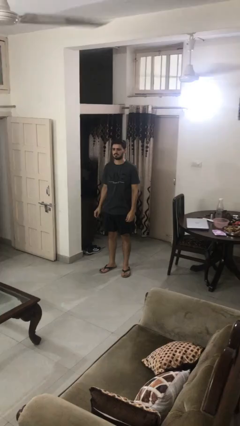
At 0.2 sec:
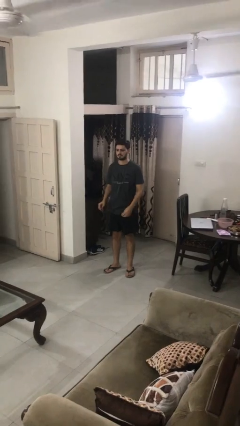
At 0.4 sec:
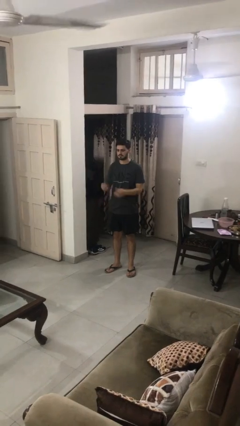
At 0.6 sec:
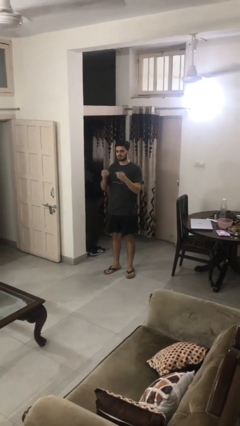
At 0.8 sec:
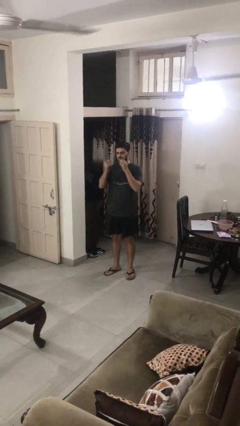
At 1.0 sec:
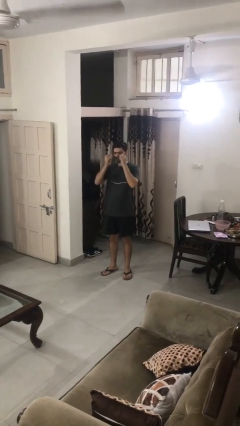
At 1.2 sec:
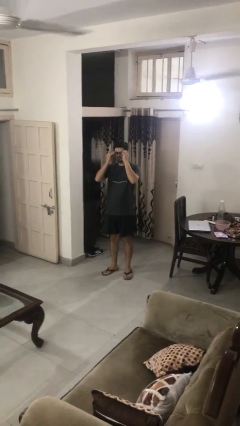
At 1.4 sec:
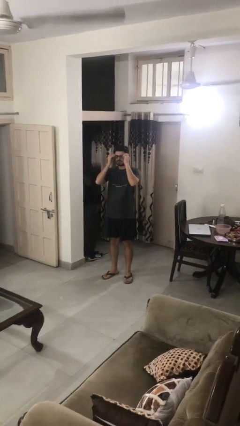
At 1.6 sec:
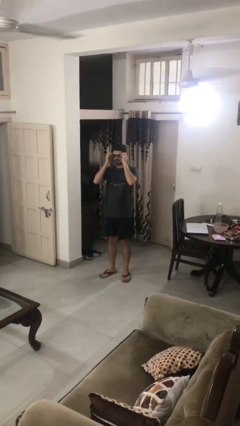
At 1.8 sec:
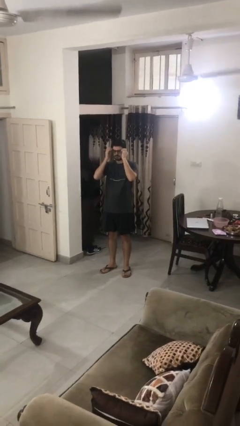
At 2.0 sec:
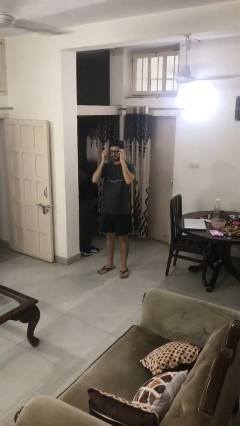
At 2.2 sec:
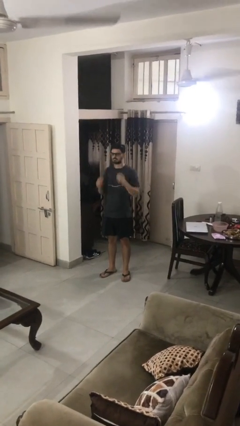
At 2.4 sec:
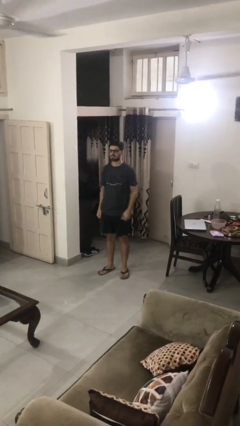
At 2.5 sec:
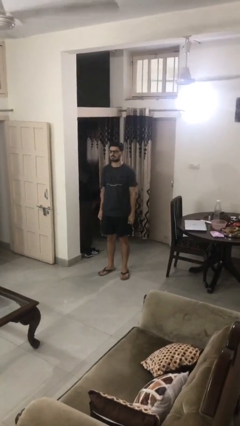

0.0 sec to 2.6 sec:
person puts on glasses

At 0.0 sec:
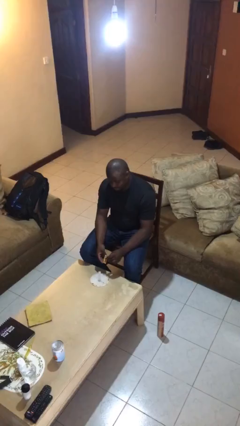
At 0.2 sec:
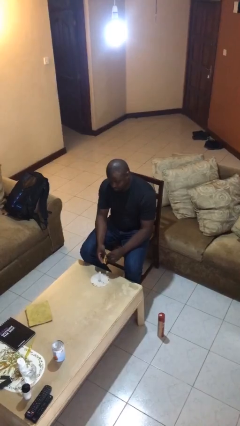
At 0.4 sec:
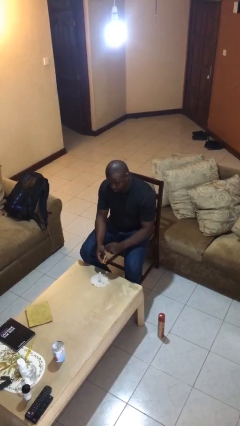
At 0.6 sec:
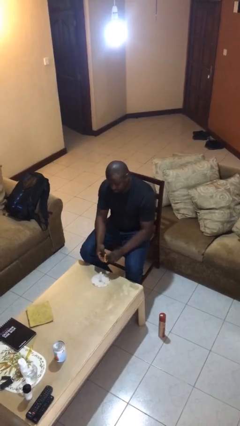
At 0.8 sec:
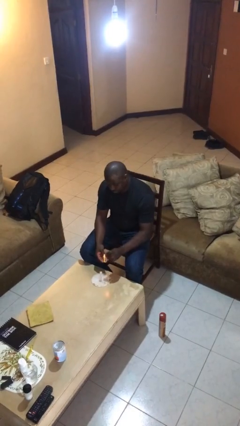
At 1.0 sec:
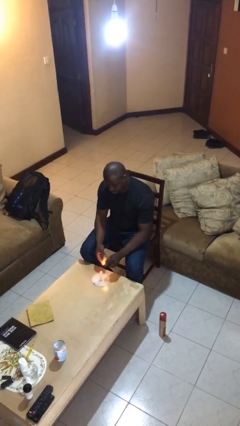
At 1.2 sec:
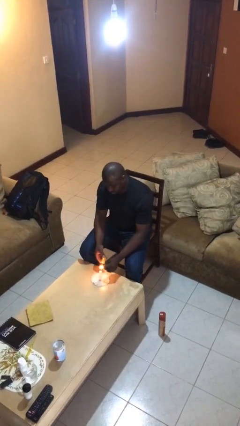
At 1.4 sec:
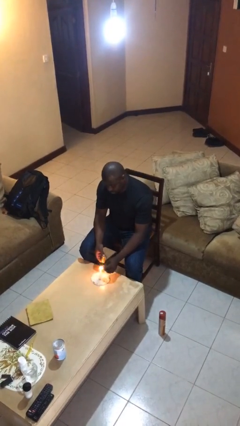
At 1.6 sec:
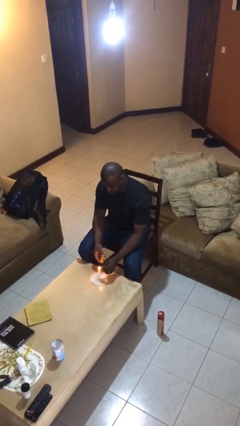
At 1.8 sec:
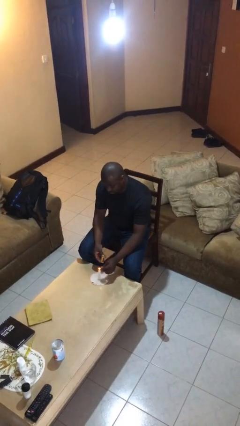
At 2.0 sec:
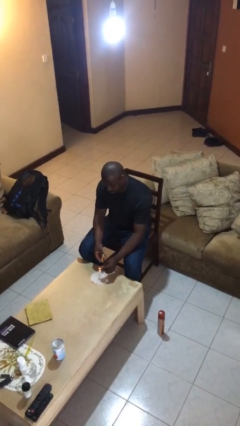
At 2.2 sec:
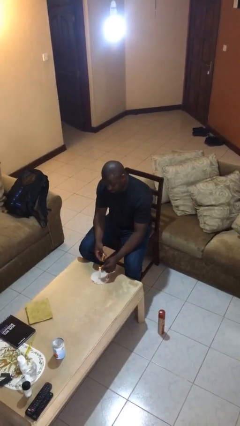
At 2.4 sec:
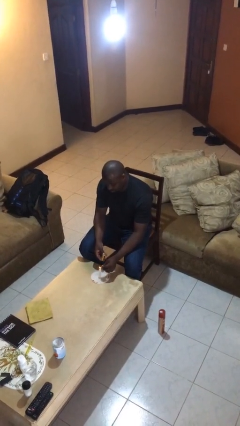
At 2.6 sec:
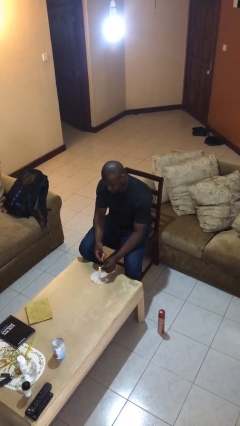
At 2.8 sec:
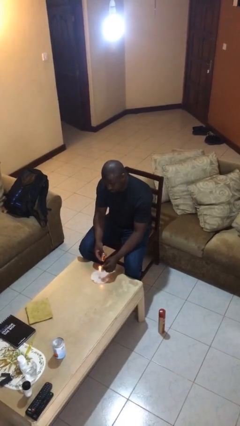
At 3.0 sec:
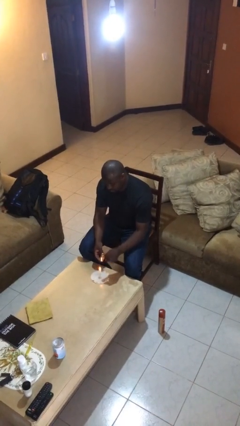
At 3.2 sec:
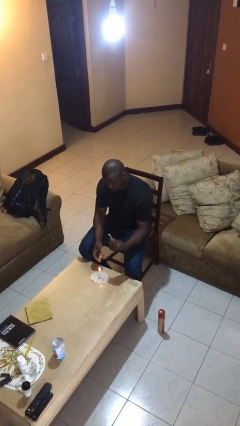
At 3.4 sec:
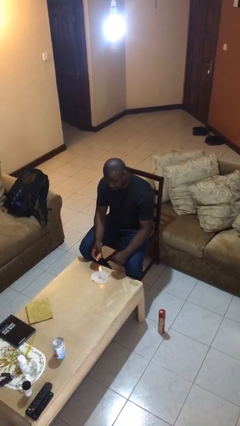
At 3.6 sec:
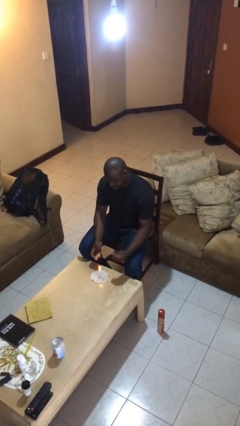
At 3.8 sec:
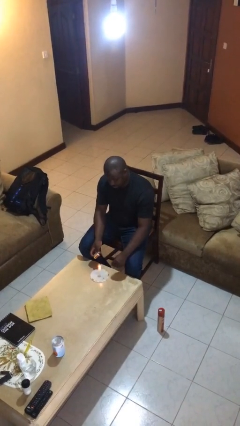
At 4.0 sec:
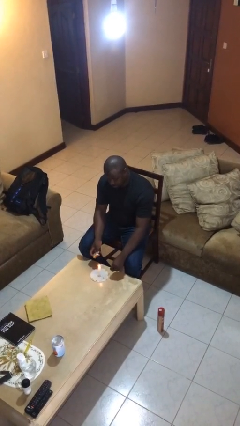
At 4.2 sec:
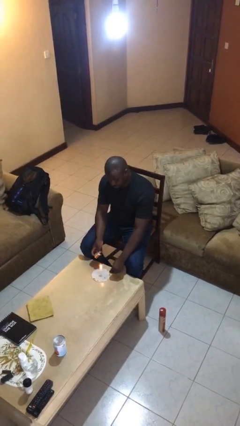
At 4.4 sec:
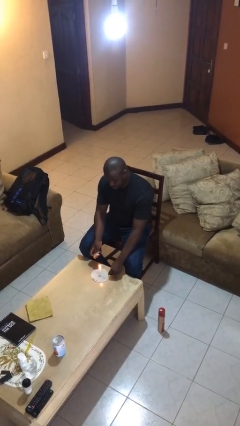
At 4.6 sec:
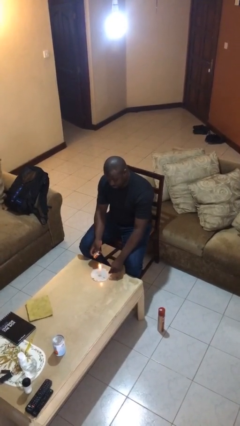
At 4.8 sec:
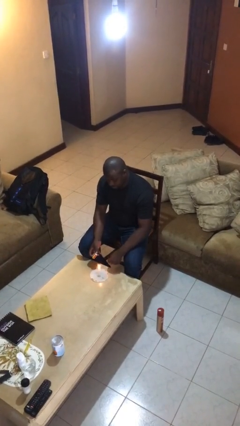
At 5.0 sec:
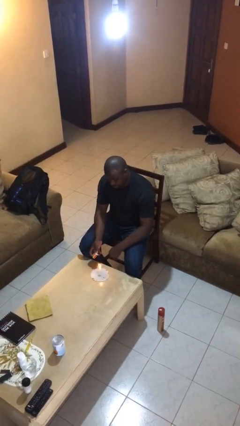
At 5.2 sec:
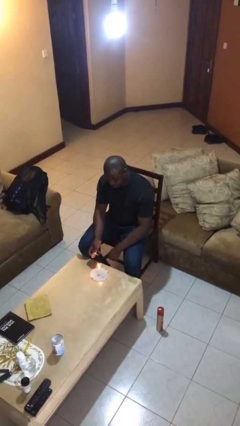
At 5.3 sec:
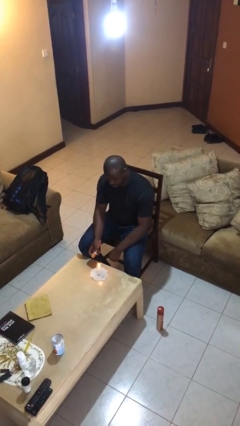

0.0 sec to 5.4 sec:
person lights candle

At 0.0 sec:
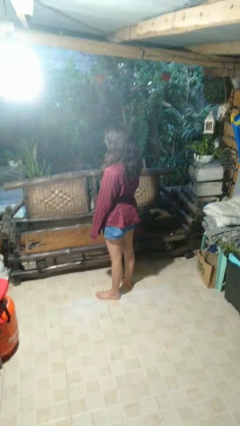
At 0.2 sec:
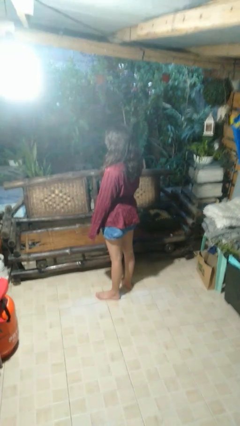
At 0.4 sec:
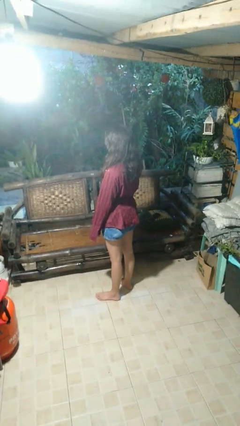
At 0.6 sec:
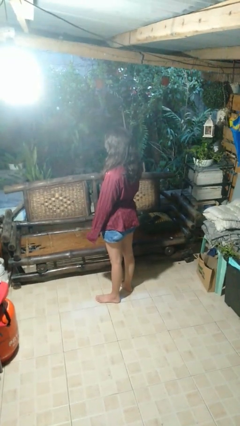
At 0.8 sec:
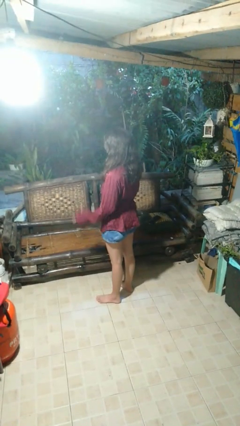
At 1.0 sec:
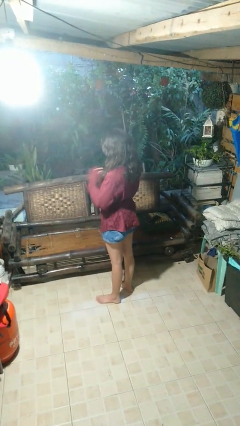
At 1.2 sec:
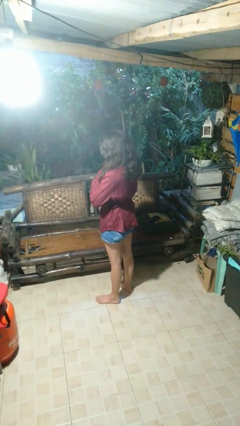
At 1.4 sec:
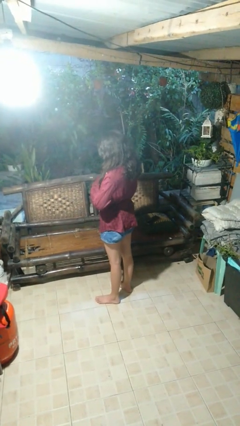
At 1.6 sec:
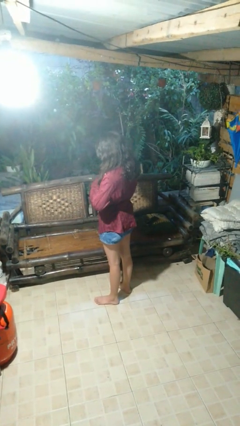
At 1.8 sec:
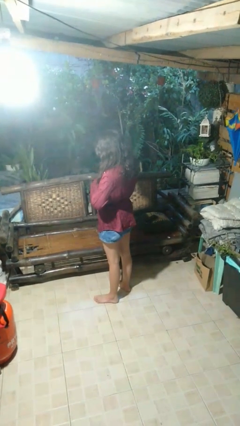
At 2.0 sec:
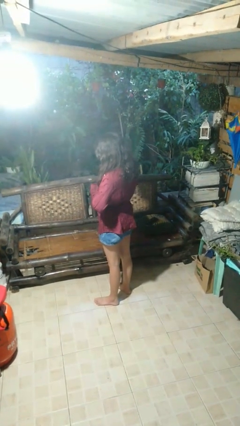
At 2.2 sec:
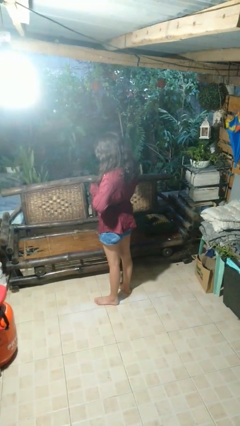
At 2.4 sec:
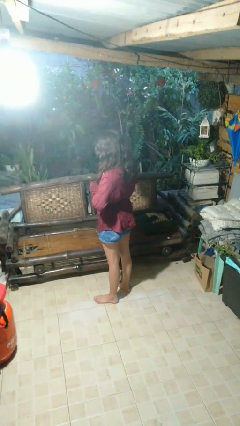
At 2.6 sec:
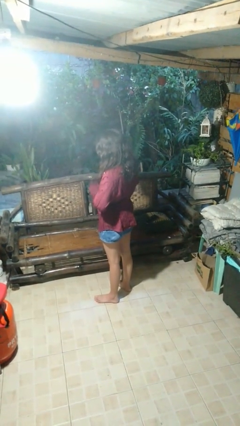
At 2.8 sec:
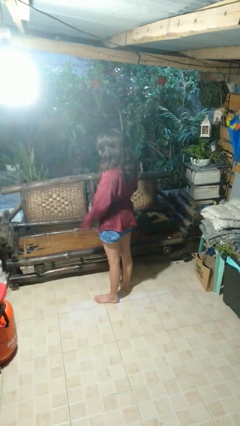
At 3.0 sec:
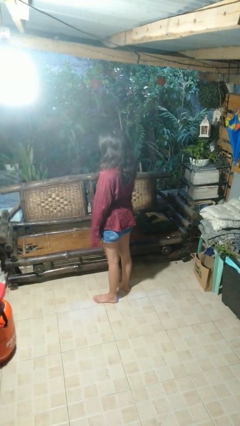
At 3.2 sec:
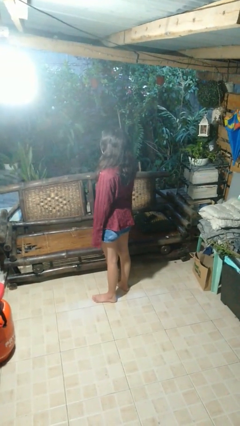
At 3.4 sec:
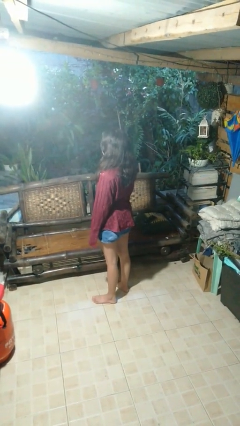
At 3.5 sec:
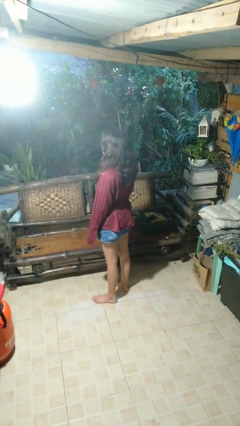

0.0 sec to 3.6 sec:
person unbuttons shirt

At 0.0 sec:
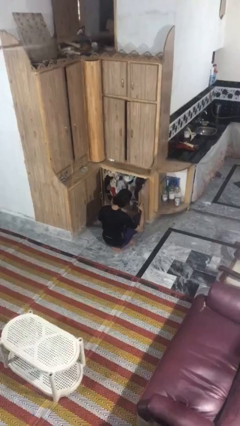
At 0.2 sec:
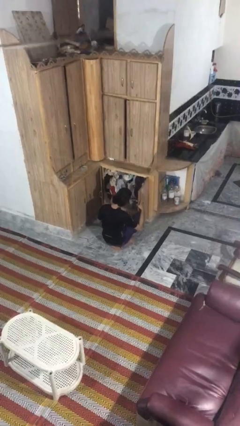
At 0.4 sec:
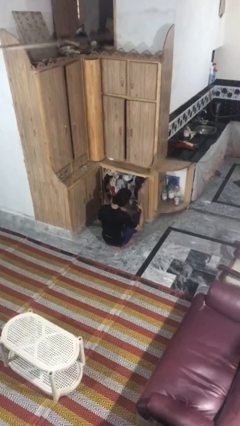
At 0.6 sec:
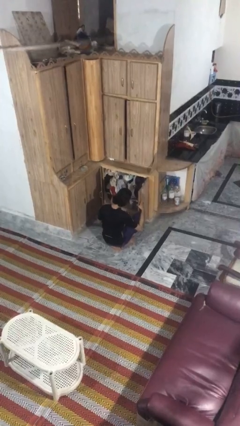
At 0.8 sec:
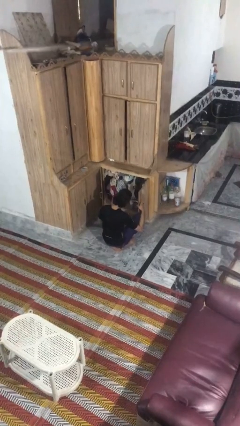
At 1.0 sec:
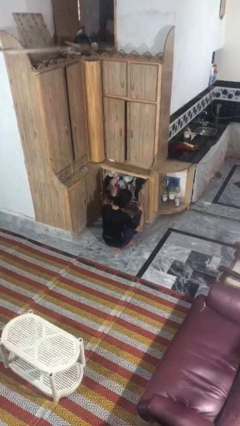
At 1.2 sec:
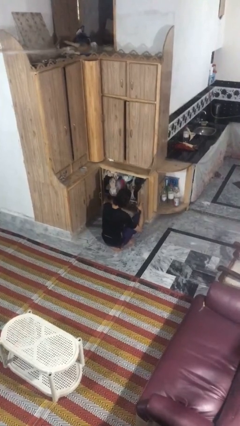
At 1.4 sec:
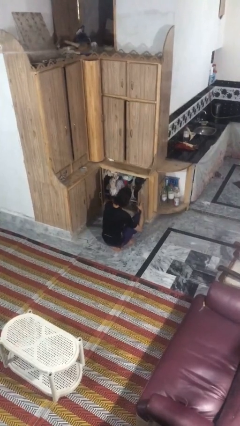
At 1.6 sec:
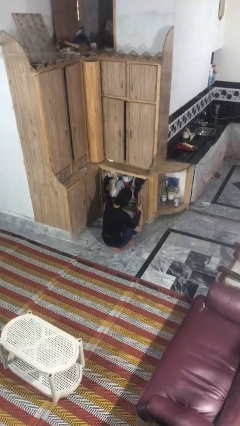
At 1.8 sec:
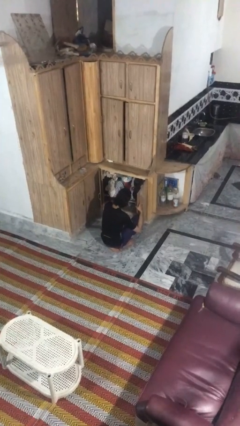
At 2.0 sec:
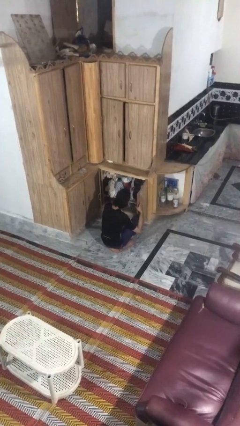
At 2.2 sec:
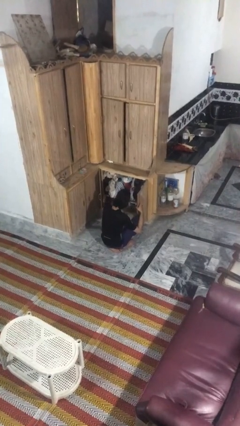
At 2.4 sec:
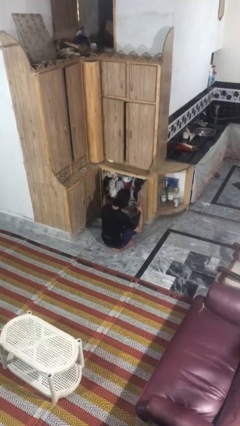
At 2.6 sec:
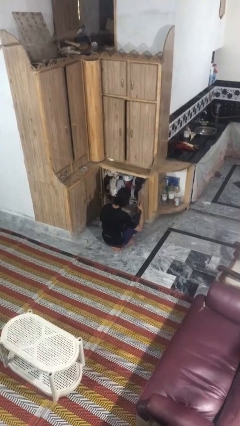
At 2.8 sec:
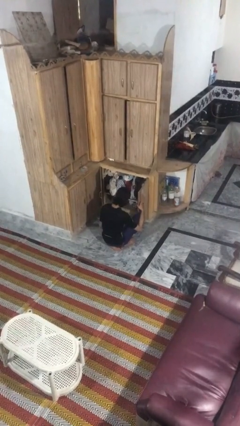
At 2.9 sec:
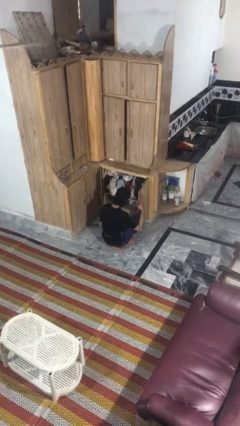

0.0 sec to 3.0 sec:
person puts down object into cabinet

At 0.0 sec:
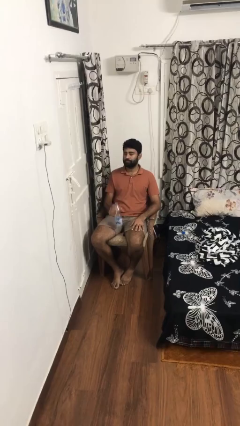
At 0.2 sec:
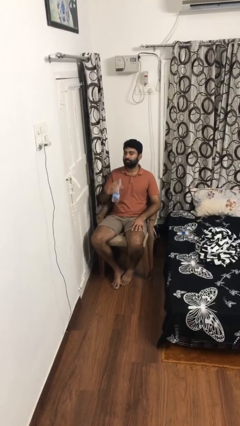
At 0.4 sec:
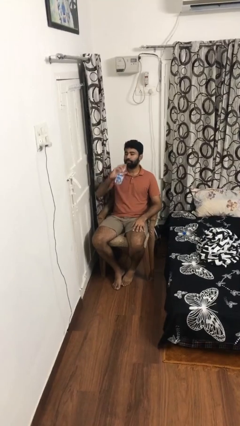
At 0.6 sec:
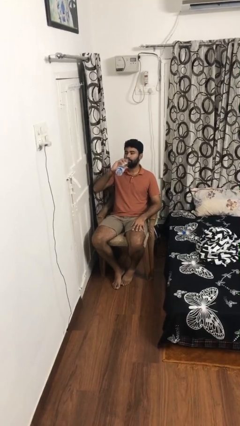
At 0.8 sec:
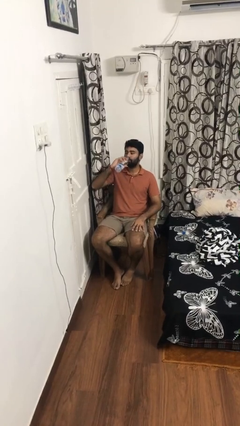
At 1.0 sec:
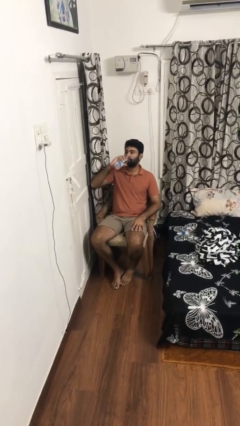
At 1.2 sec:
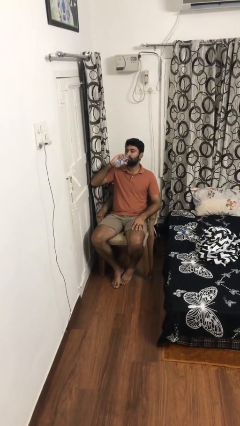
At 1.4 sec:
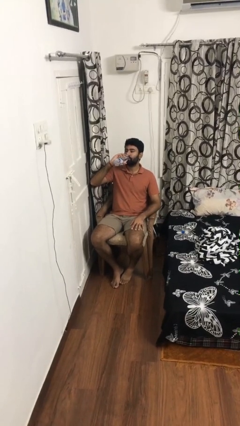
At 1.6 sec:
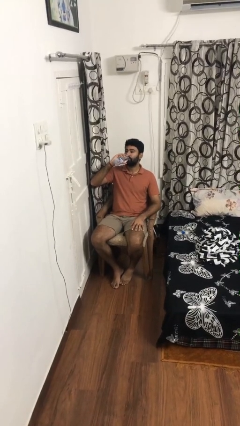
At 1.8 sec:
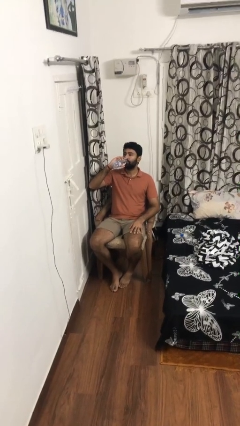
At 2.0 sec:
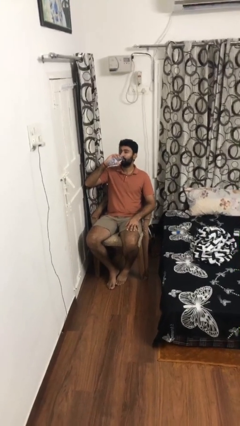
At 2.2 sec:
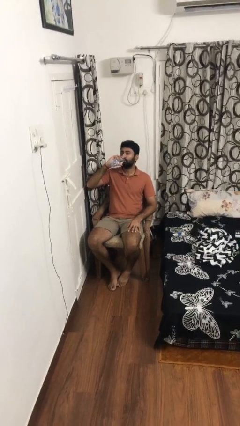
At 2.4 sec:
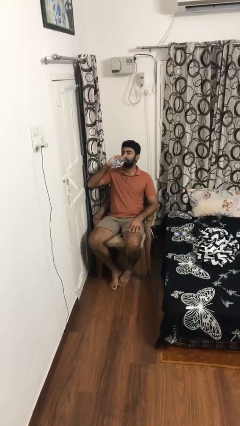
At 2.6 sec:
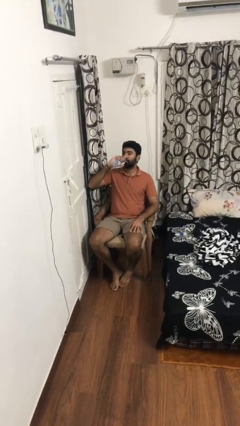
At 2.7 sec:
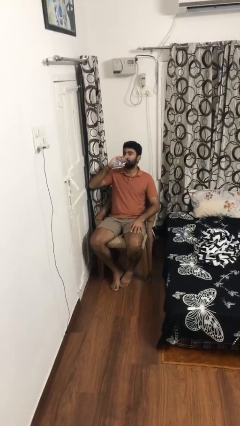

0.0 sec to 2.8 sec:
person drinks from bottle
